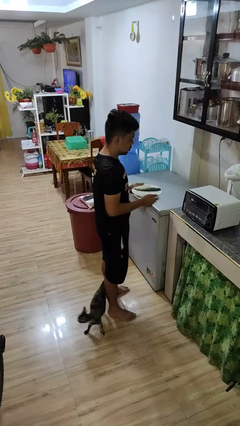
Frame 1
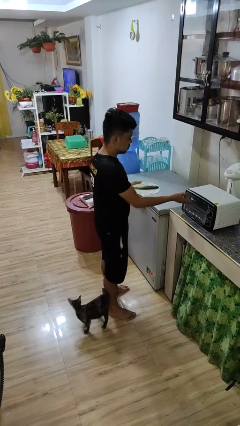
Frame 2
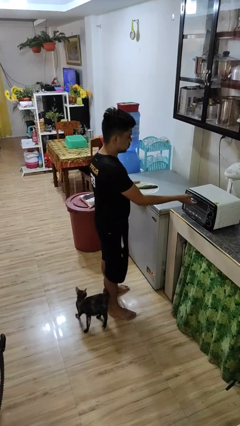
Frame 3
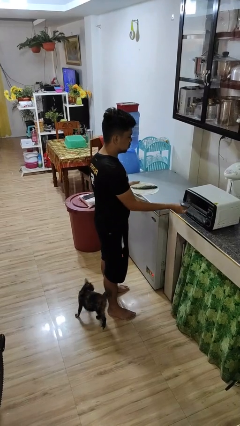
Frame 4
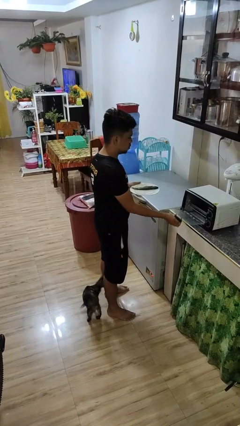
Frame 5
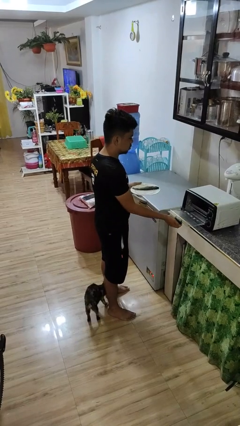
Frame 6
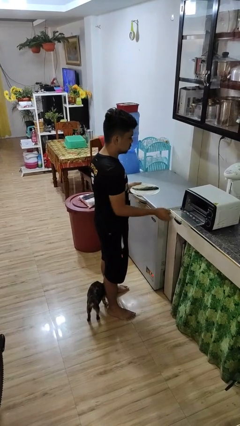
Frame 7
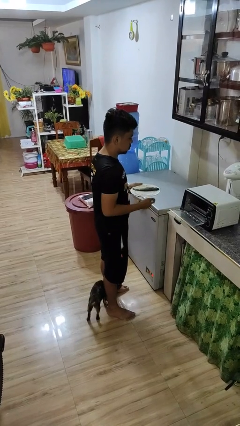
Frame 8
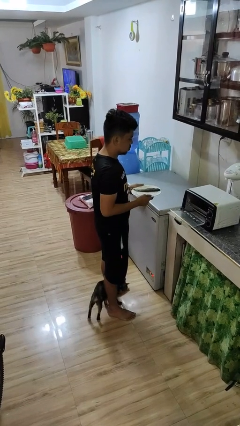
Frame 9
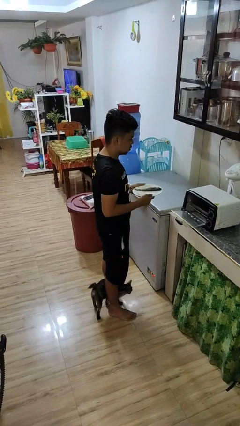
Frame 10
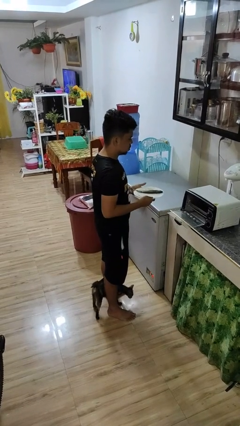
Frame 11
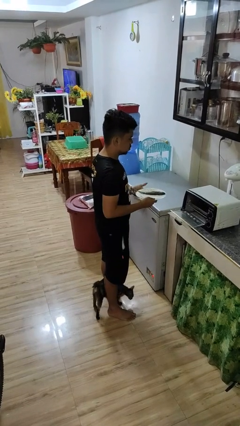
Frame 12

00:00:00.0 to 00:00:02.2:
person opens microwave

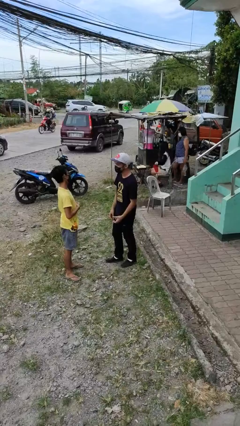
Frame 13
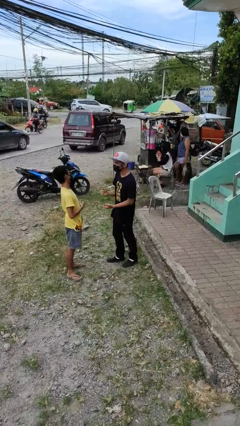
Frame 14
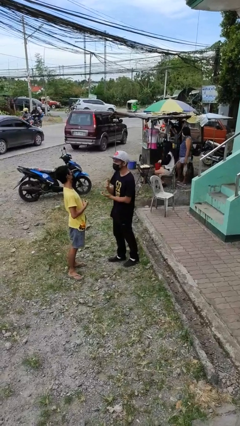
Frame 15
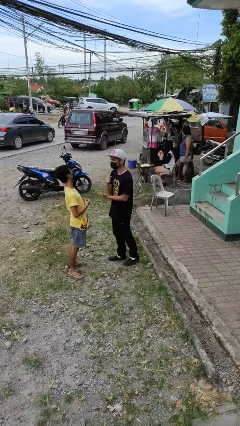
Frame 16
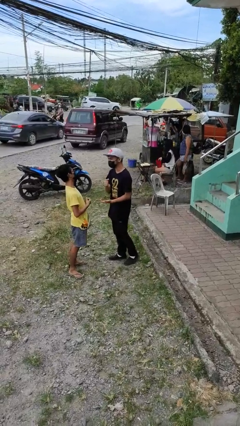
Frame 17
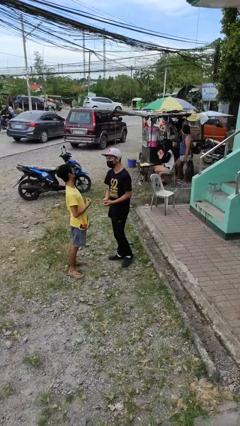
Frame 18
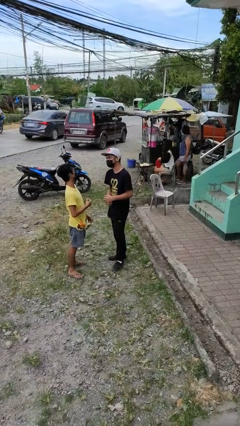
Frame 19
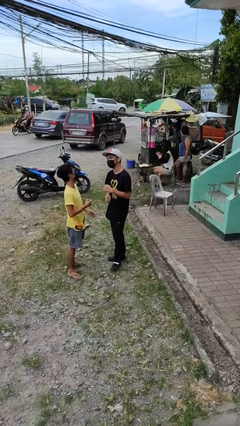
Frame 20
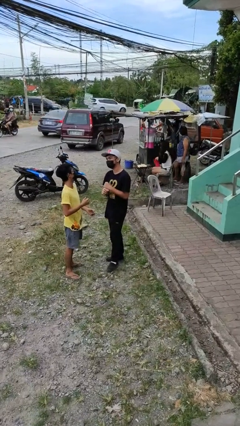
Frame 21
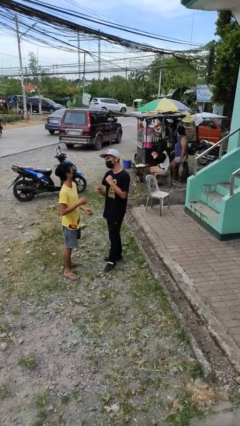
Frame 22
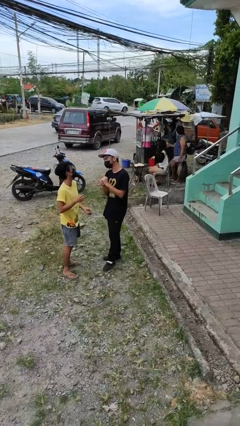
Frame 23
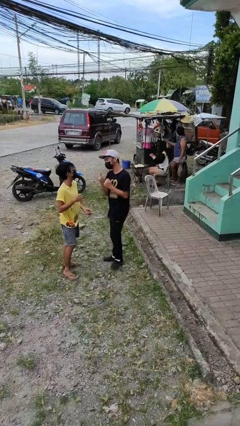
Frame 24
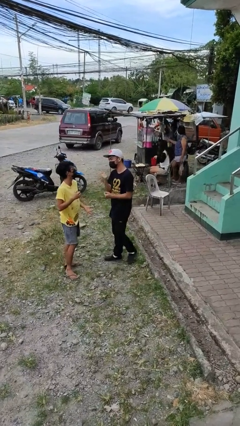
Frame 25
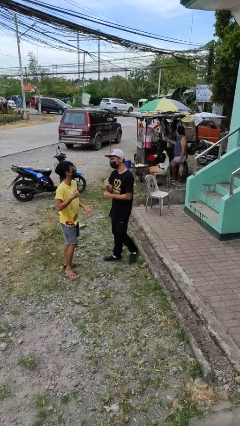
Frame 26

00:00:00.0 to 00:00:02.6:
person talks to person

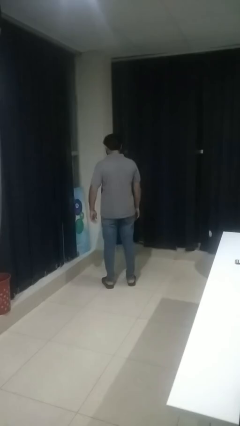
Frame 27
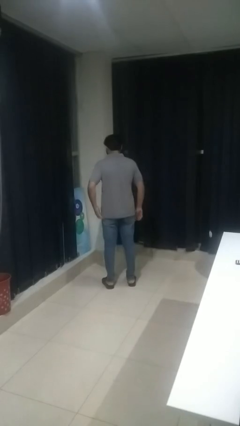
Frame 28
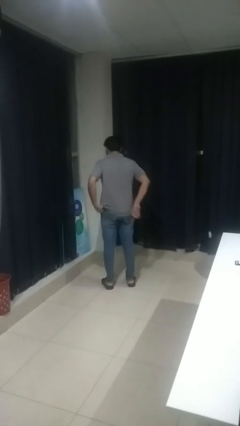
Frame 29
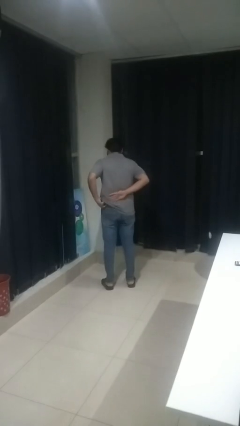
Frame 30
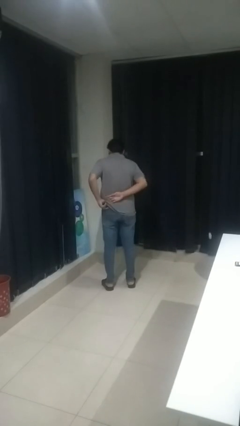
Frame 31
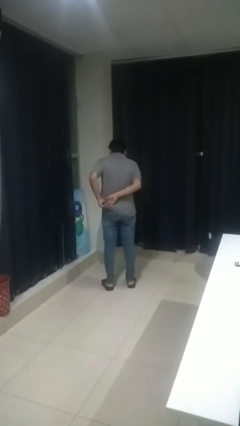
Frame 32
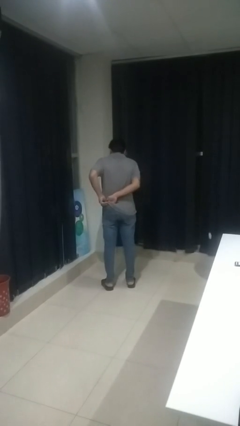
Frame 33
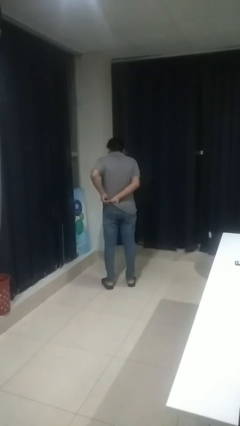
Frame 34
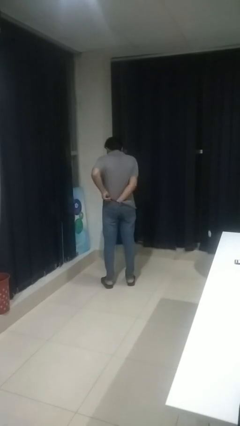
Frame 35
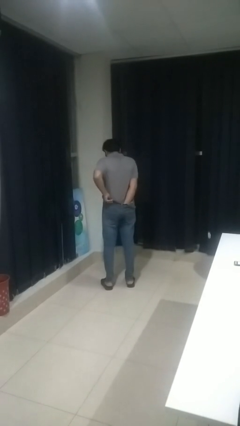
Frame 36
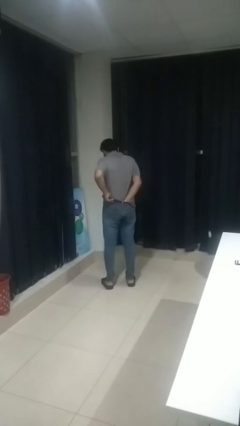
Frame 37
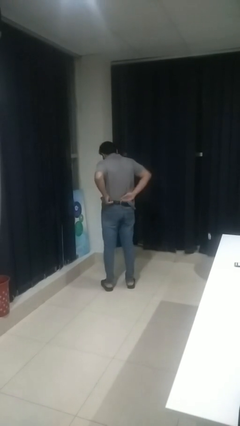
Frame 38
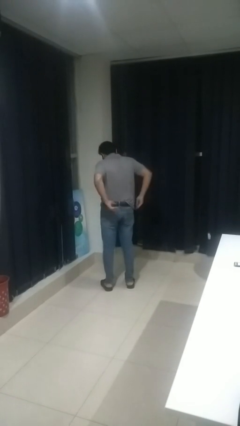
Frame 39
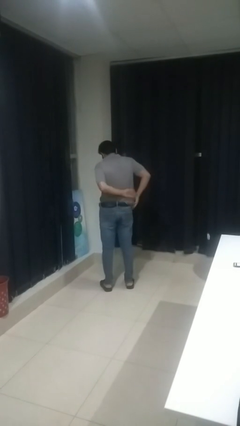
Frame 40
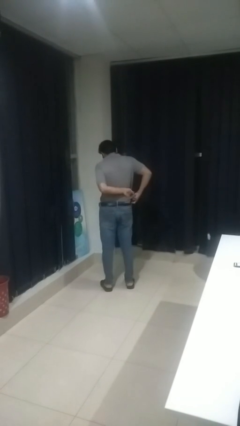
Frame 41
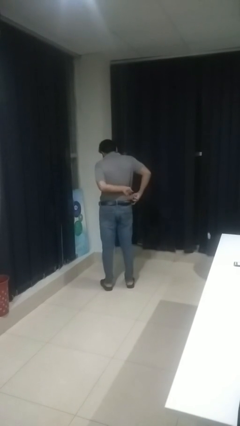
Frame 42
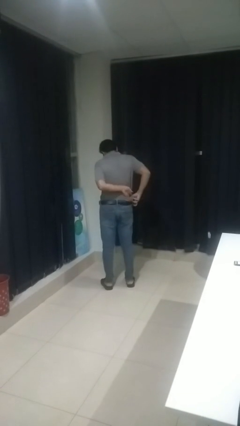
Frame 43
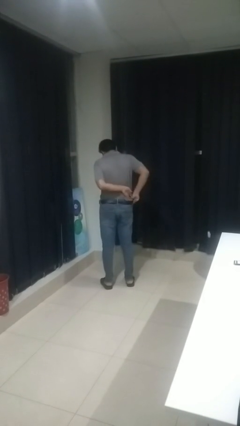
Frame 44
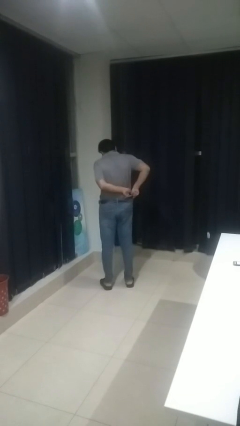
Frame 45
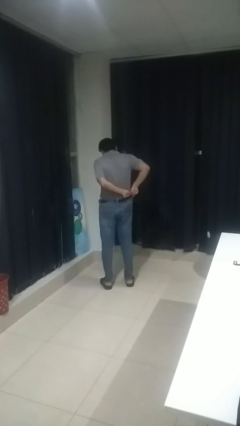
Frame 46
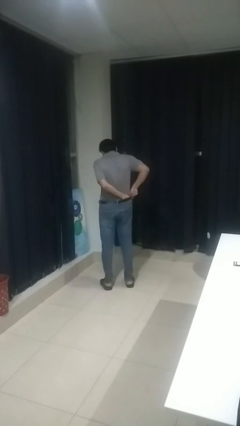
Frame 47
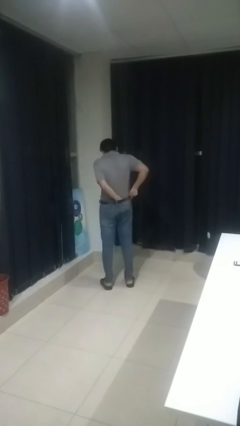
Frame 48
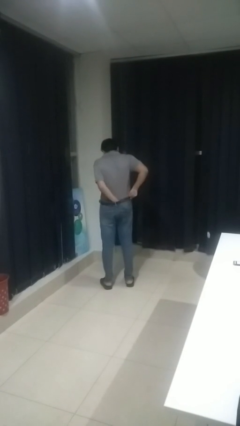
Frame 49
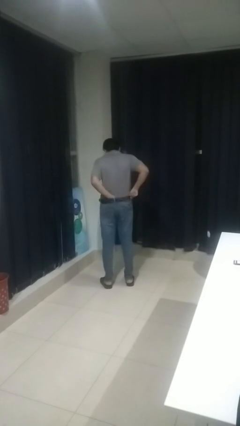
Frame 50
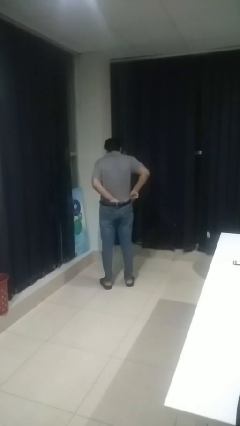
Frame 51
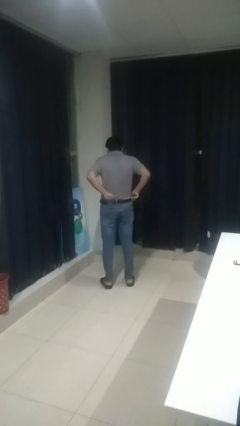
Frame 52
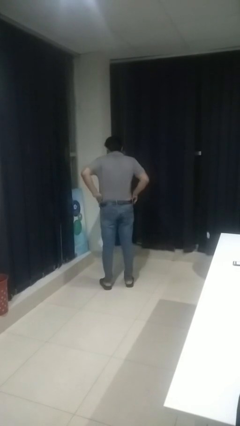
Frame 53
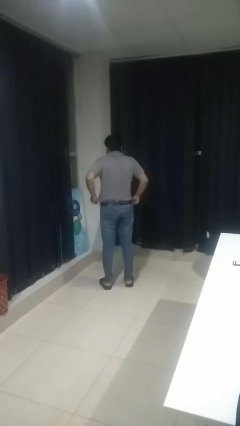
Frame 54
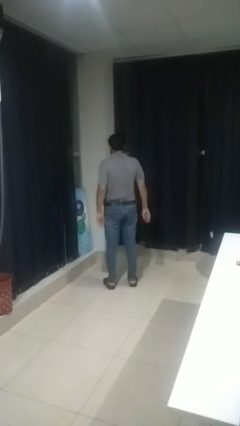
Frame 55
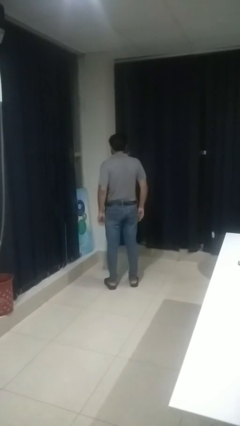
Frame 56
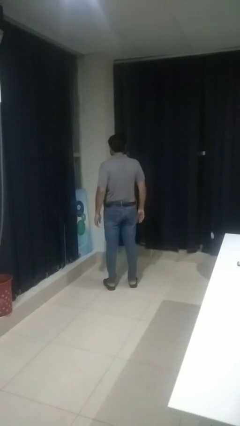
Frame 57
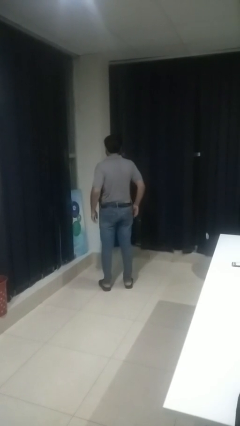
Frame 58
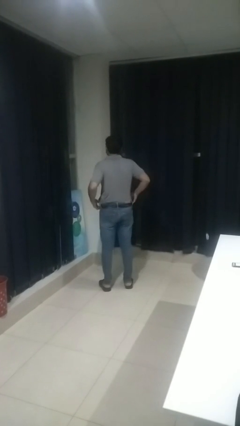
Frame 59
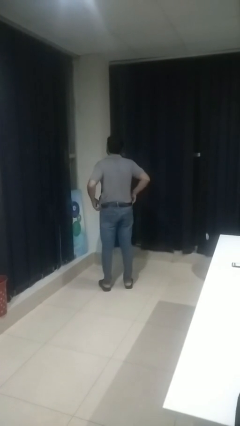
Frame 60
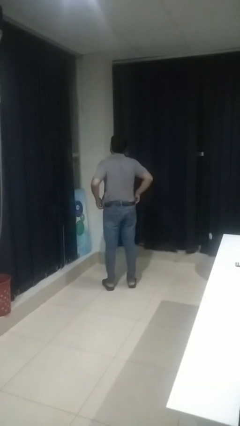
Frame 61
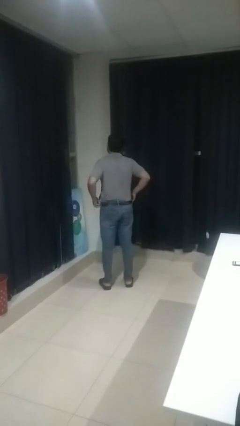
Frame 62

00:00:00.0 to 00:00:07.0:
person tucks in shirt

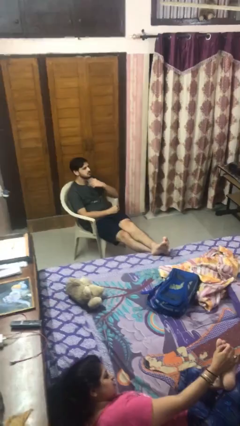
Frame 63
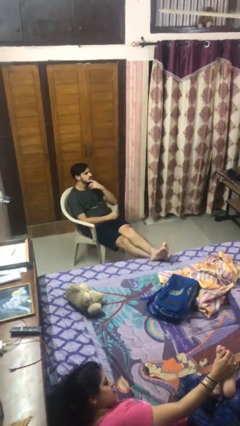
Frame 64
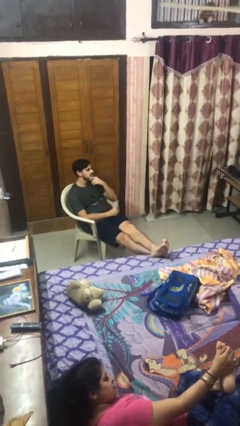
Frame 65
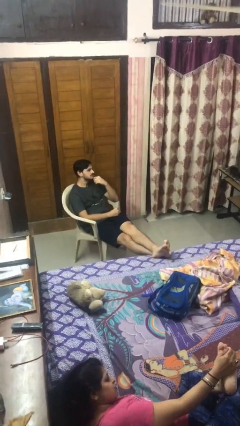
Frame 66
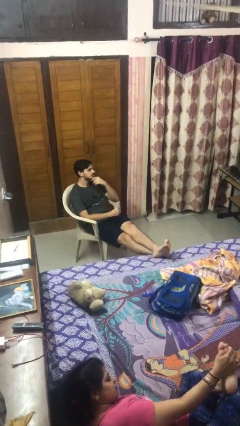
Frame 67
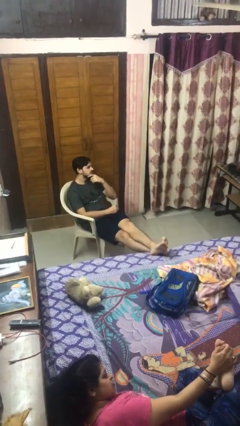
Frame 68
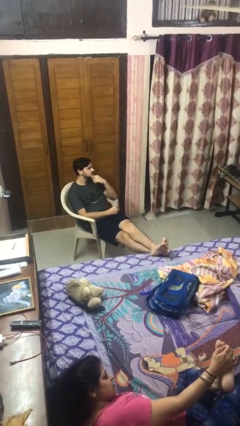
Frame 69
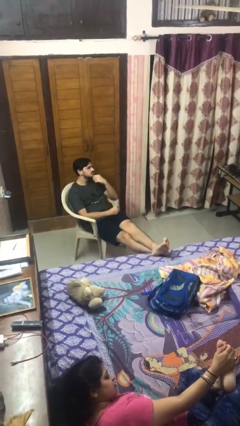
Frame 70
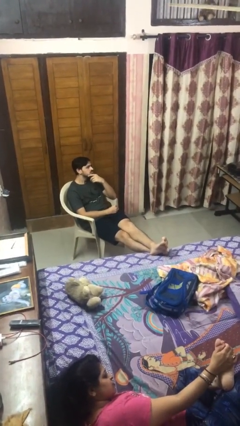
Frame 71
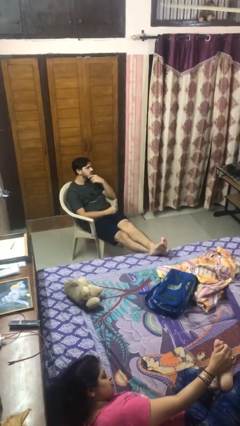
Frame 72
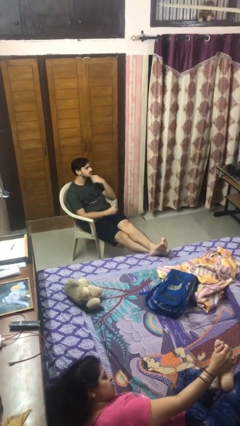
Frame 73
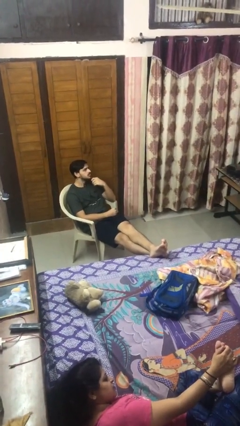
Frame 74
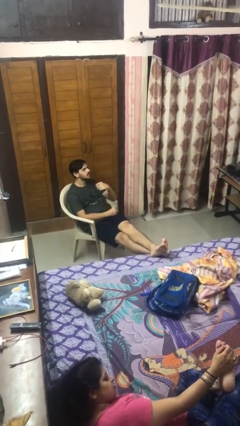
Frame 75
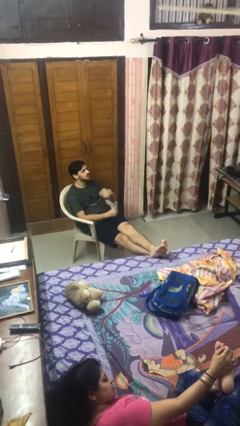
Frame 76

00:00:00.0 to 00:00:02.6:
person strokes chin

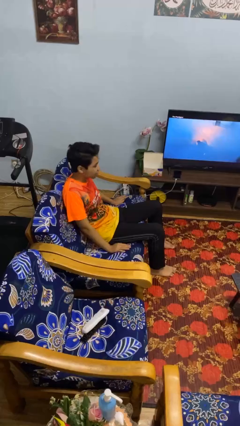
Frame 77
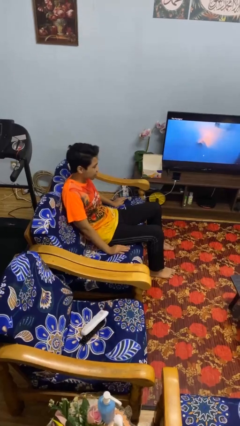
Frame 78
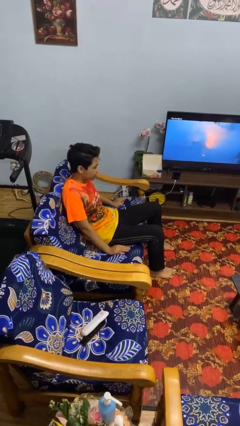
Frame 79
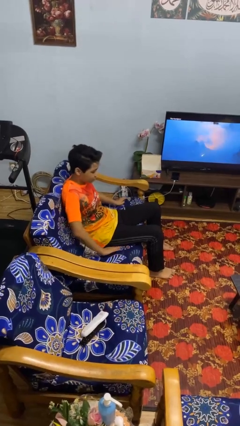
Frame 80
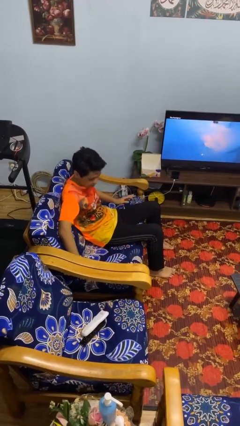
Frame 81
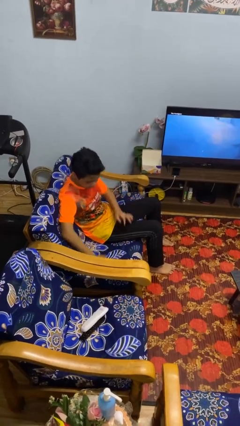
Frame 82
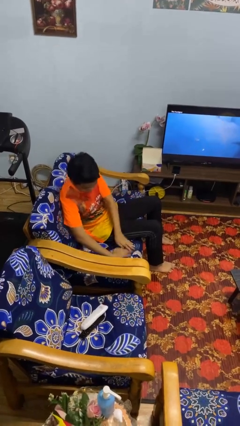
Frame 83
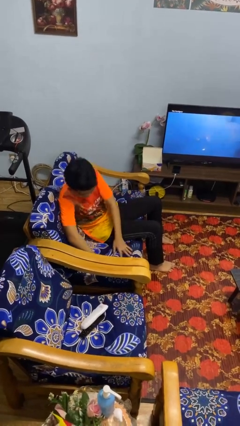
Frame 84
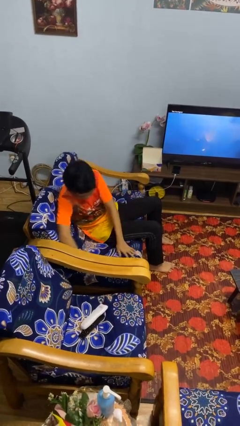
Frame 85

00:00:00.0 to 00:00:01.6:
person searches in couch

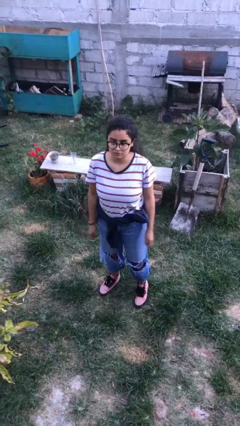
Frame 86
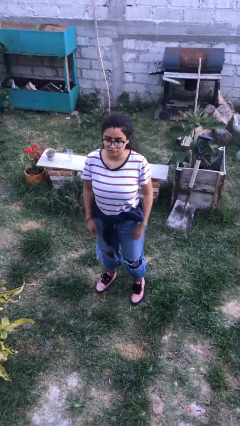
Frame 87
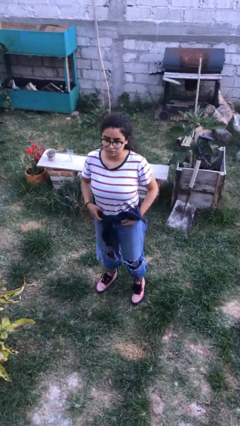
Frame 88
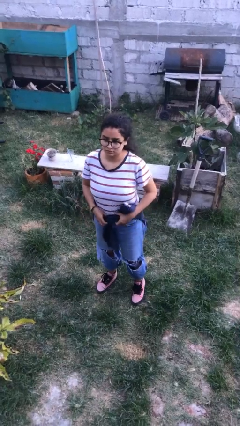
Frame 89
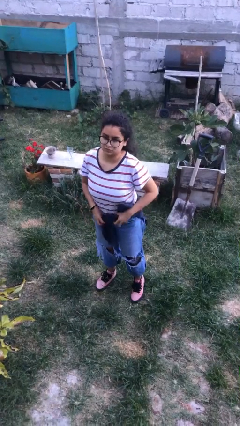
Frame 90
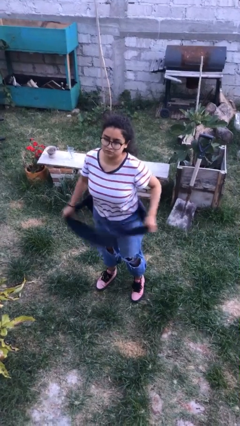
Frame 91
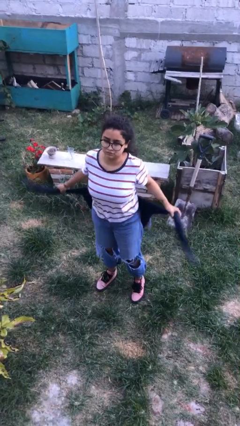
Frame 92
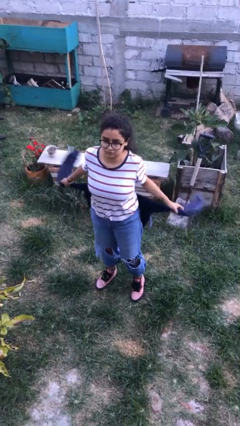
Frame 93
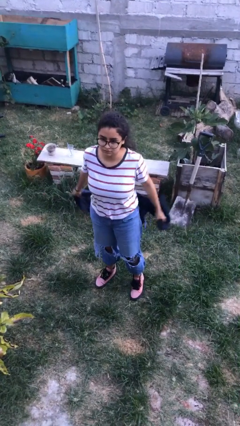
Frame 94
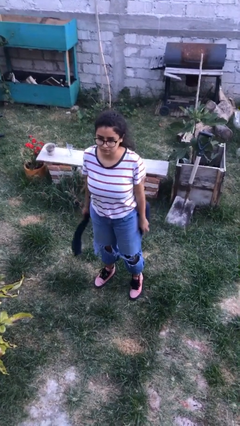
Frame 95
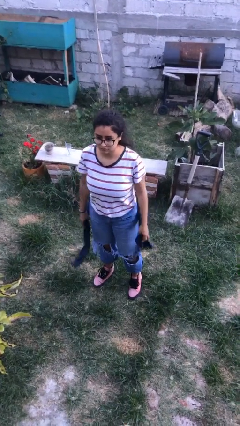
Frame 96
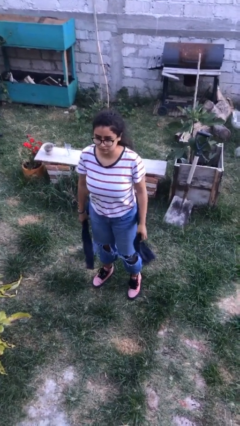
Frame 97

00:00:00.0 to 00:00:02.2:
person unties jacket around waist
